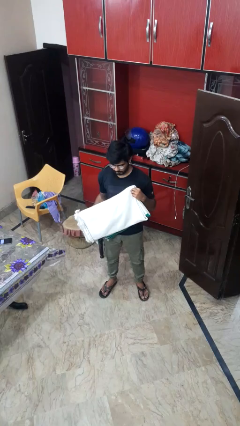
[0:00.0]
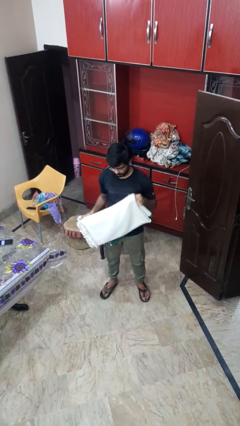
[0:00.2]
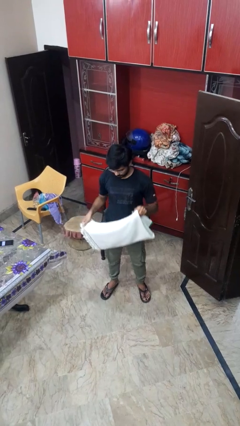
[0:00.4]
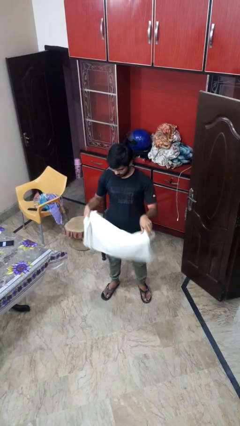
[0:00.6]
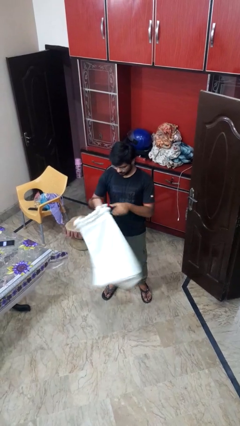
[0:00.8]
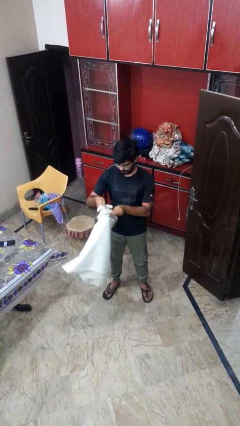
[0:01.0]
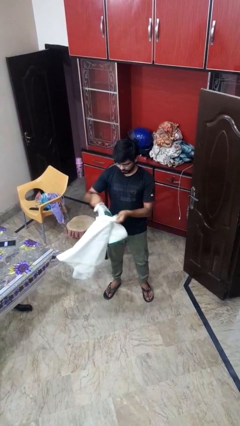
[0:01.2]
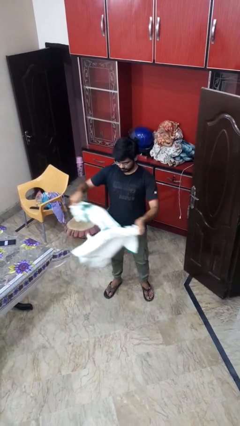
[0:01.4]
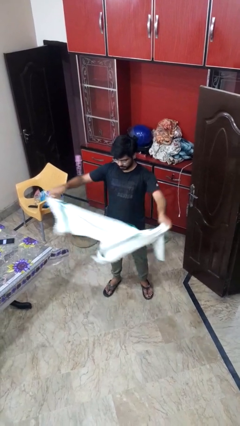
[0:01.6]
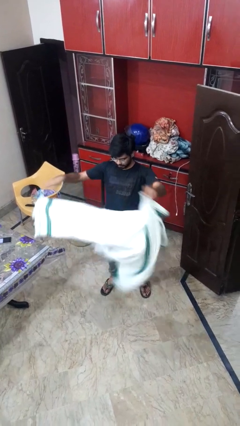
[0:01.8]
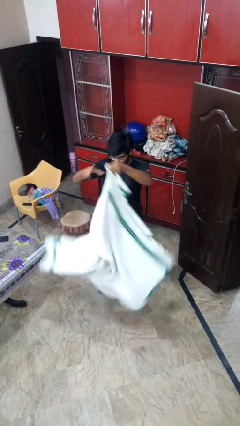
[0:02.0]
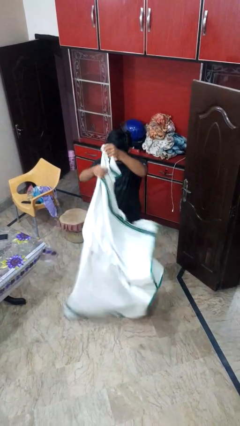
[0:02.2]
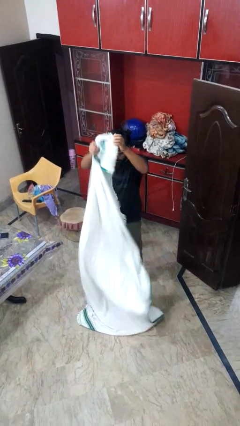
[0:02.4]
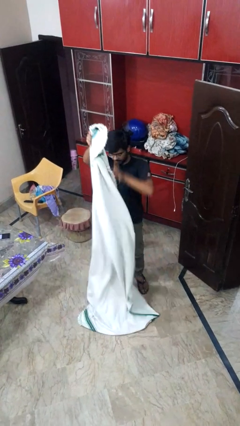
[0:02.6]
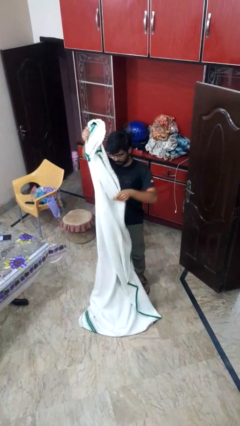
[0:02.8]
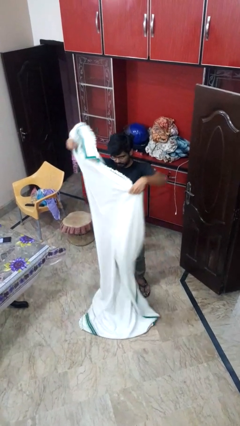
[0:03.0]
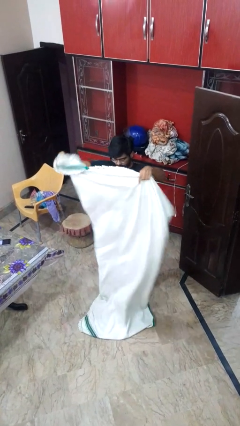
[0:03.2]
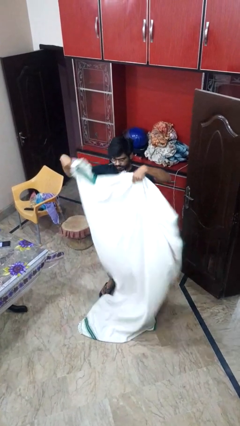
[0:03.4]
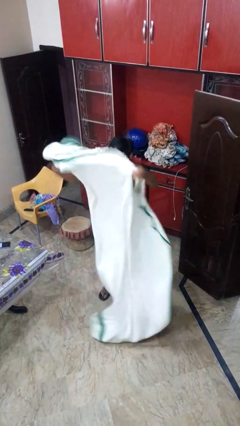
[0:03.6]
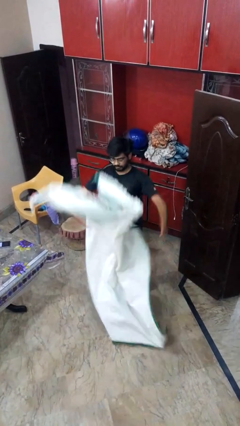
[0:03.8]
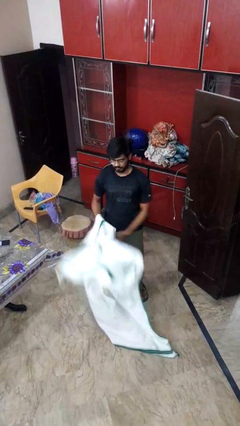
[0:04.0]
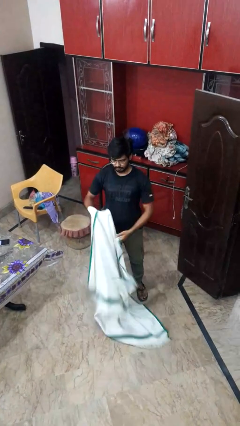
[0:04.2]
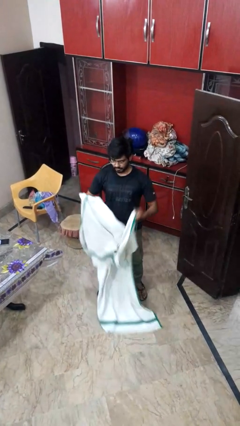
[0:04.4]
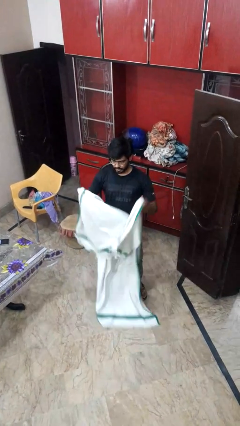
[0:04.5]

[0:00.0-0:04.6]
person unfolds blanket

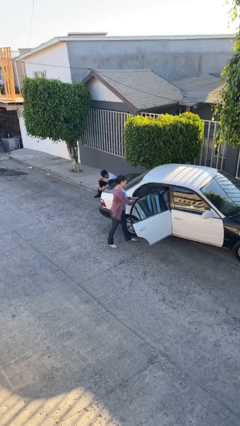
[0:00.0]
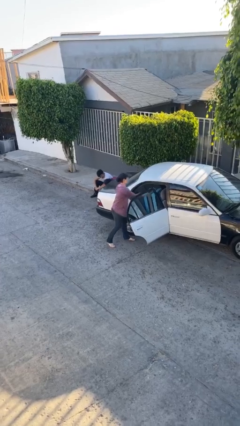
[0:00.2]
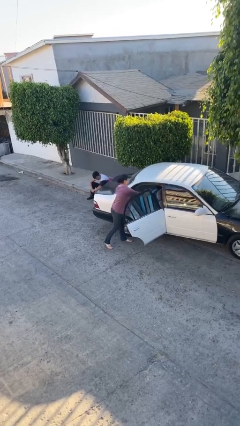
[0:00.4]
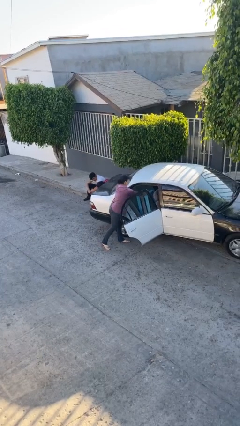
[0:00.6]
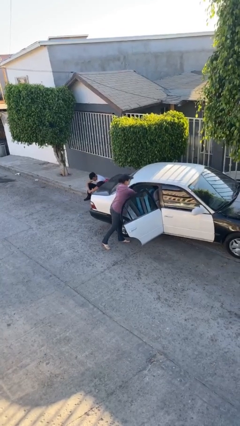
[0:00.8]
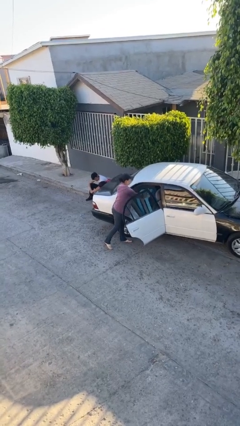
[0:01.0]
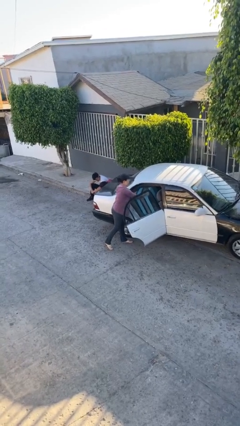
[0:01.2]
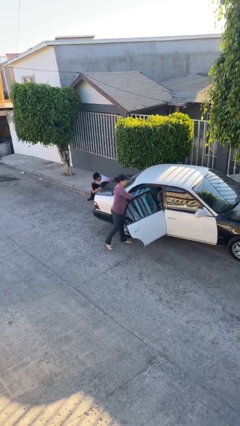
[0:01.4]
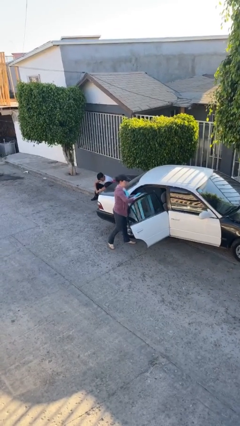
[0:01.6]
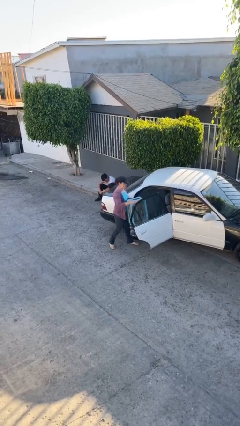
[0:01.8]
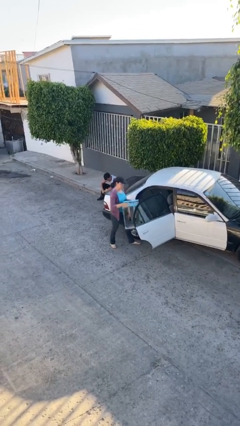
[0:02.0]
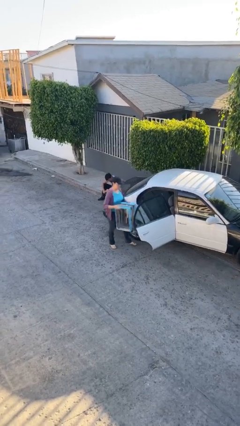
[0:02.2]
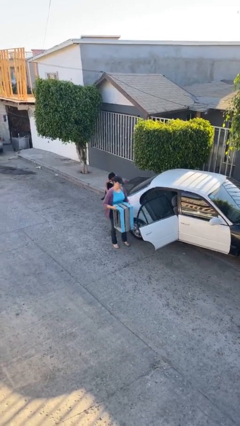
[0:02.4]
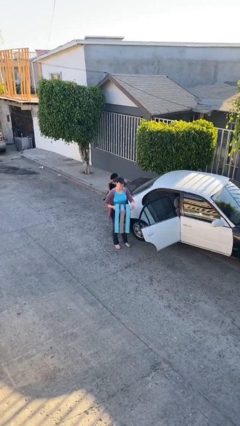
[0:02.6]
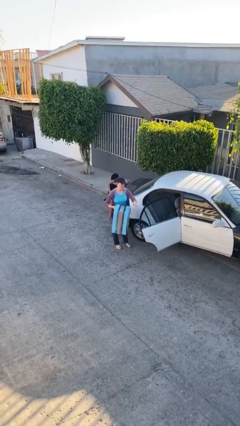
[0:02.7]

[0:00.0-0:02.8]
person unloads car

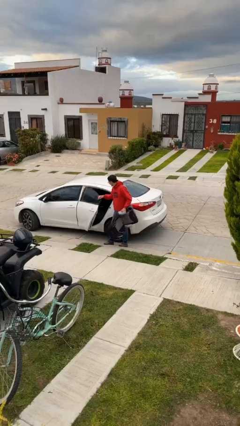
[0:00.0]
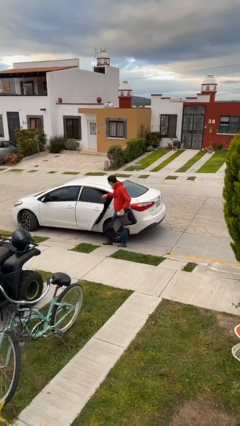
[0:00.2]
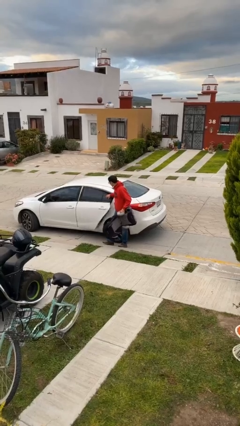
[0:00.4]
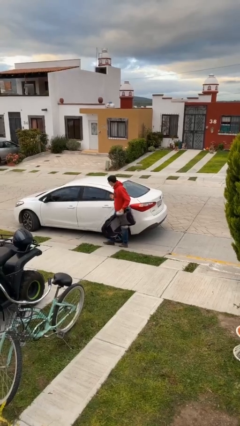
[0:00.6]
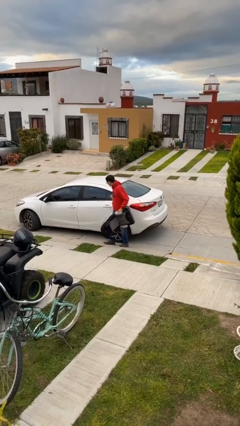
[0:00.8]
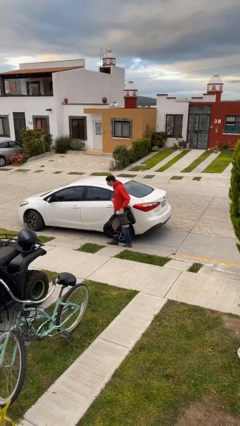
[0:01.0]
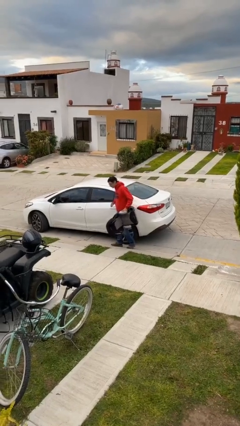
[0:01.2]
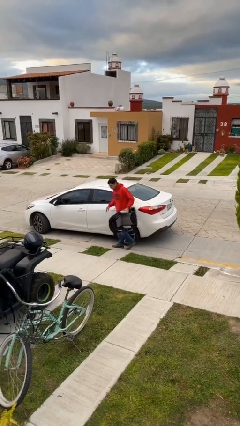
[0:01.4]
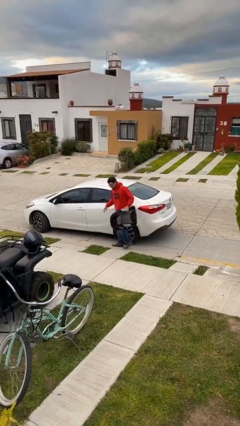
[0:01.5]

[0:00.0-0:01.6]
person closes car door

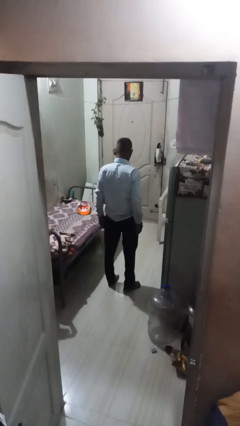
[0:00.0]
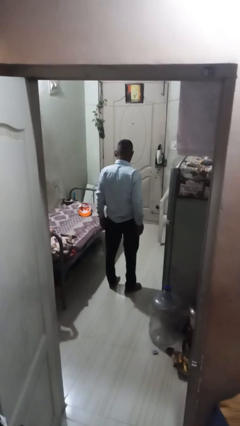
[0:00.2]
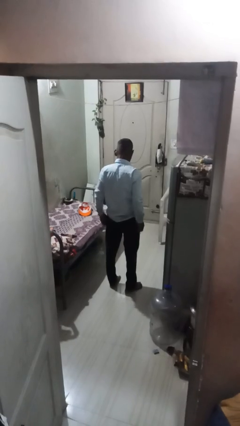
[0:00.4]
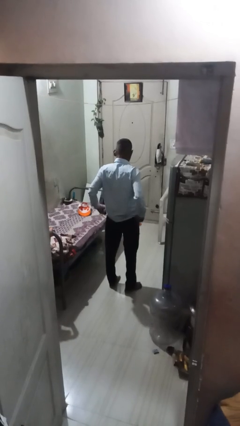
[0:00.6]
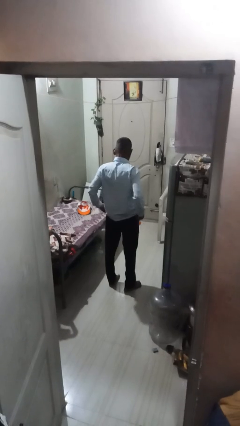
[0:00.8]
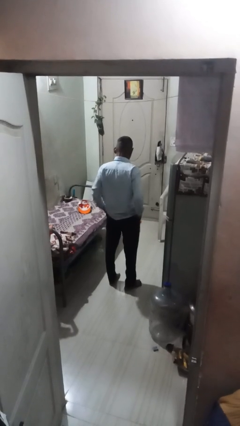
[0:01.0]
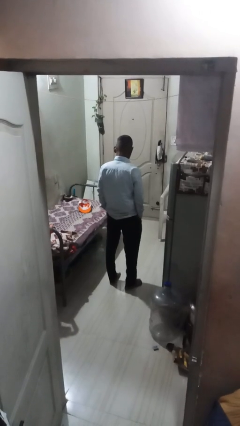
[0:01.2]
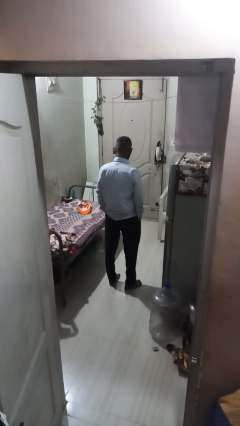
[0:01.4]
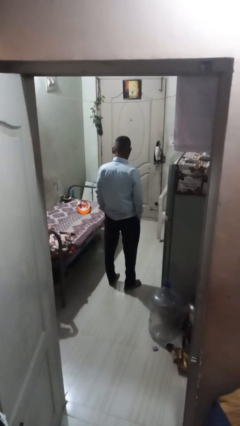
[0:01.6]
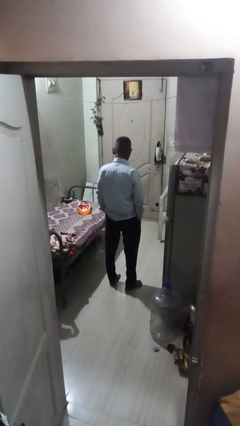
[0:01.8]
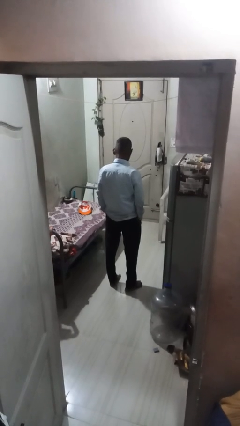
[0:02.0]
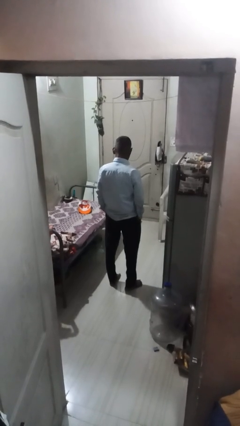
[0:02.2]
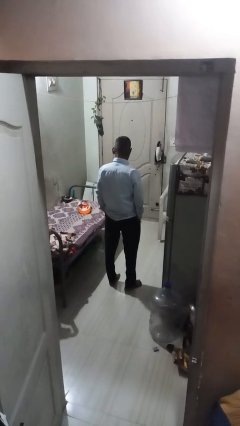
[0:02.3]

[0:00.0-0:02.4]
person puts hands in back pockets

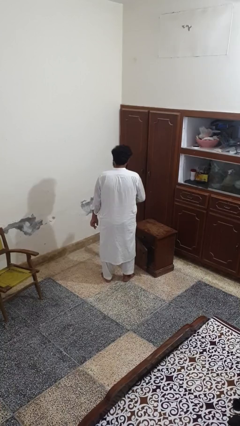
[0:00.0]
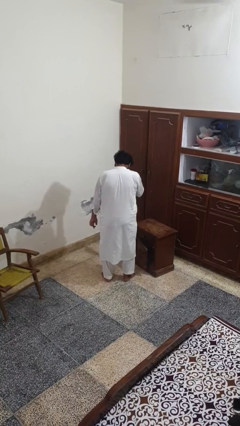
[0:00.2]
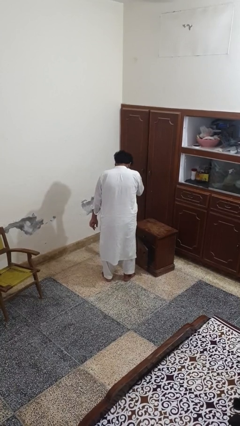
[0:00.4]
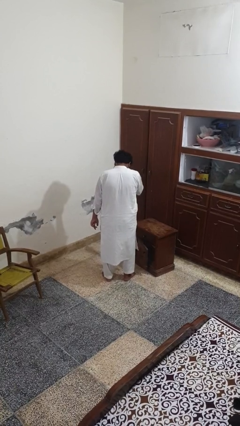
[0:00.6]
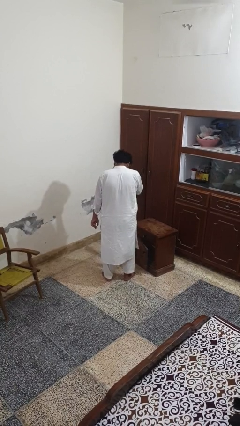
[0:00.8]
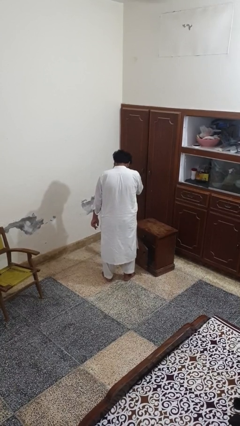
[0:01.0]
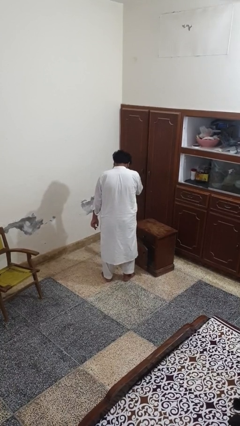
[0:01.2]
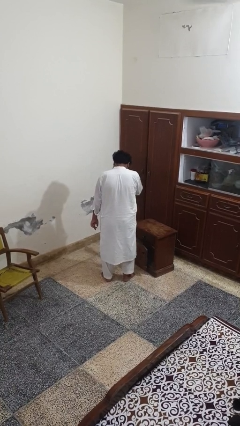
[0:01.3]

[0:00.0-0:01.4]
person sneezes into hand

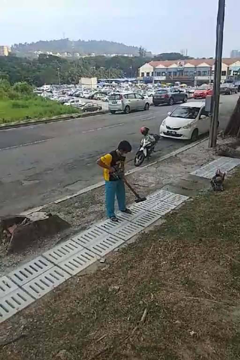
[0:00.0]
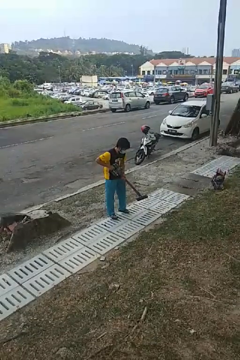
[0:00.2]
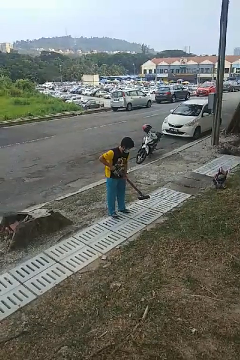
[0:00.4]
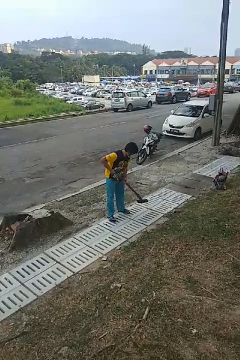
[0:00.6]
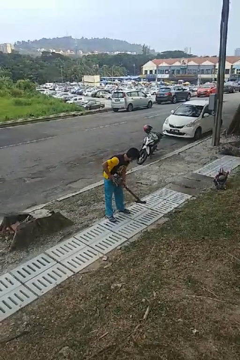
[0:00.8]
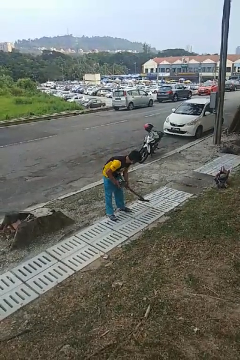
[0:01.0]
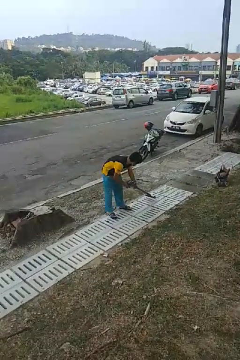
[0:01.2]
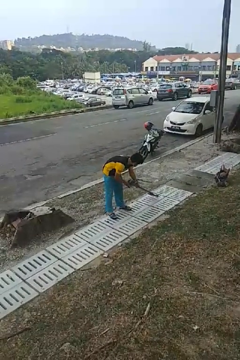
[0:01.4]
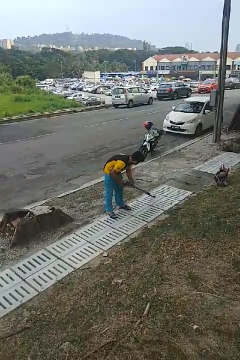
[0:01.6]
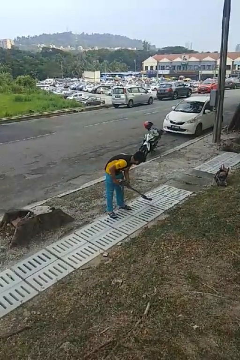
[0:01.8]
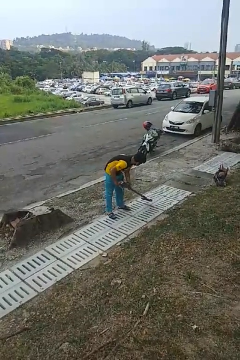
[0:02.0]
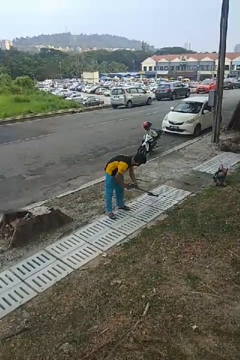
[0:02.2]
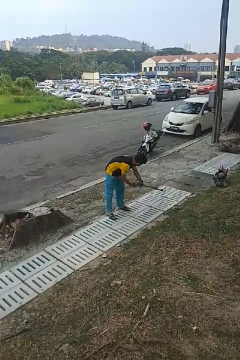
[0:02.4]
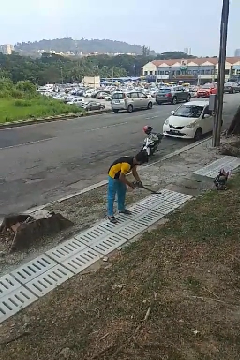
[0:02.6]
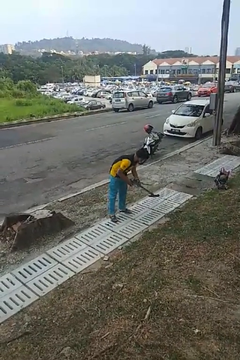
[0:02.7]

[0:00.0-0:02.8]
person vacuums carpet

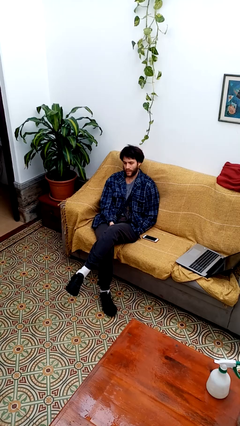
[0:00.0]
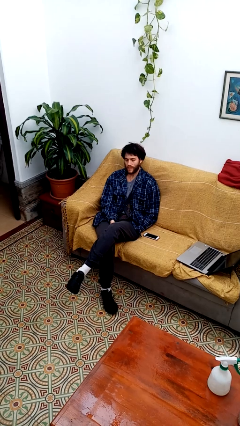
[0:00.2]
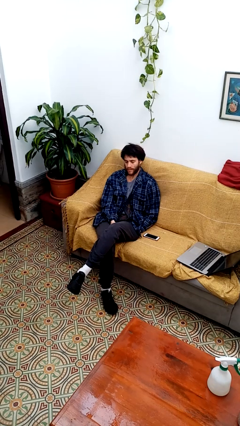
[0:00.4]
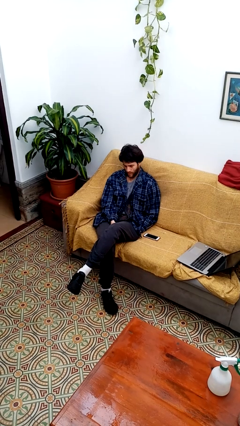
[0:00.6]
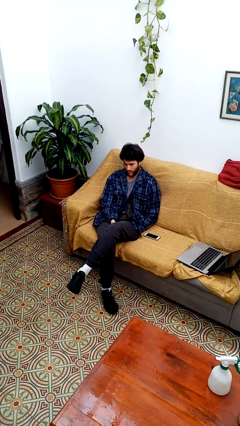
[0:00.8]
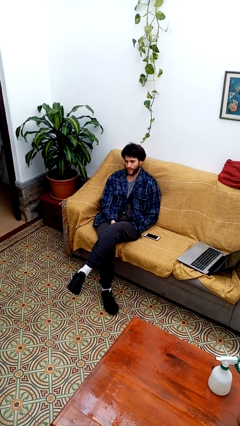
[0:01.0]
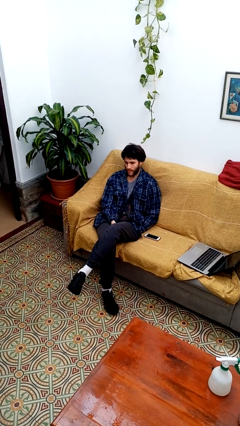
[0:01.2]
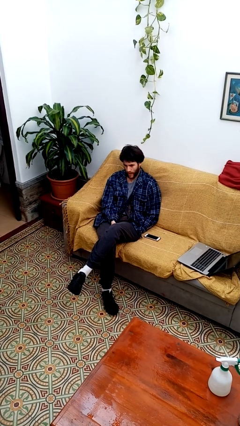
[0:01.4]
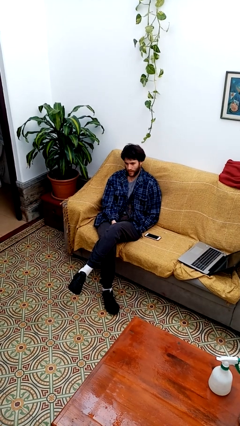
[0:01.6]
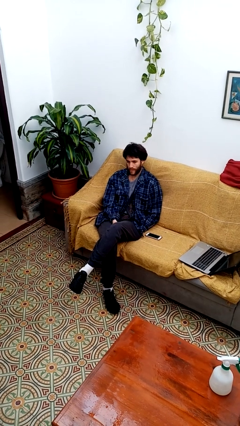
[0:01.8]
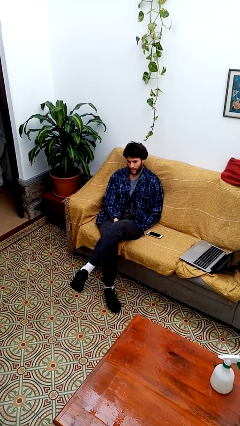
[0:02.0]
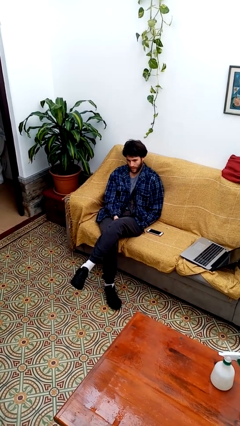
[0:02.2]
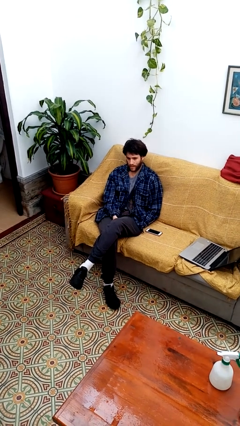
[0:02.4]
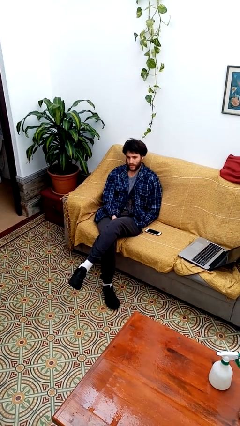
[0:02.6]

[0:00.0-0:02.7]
person nods head
